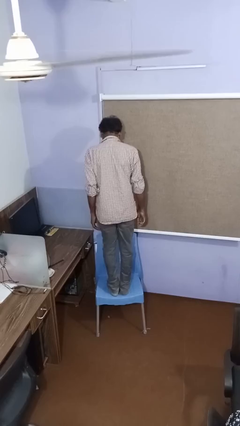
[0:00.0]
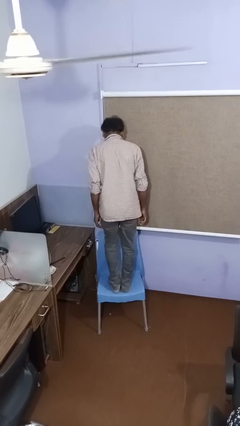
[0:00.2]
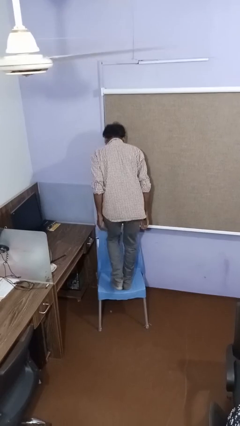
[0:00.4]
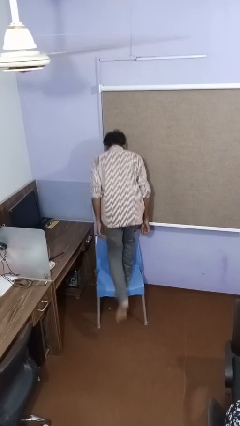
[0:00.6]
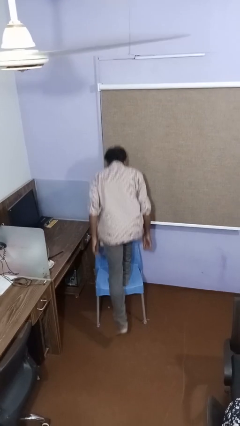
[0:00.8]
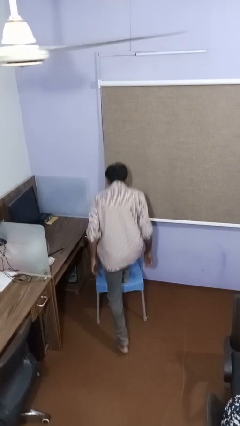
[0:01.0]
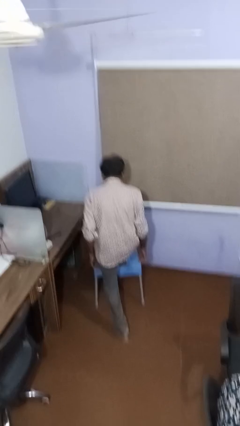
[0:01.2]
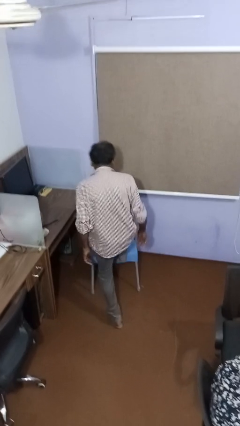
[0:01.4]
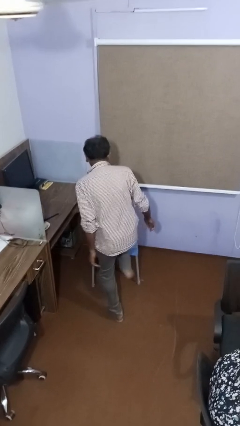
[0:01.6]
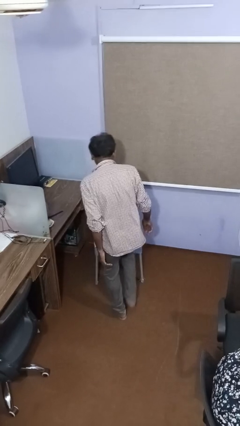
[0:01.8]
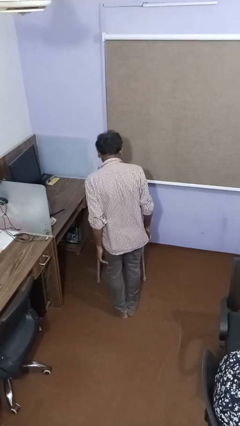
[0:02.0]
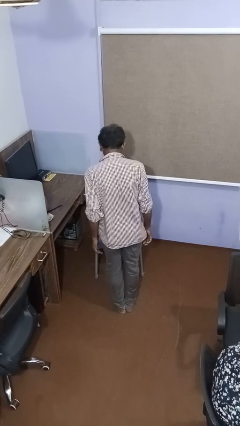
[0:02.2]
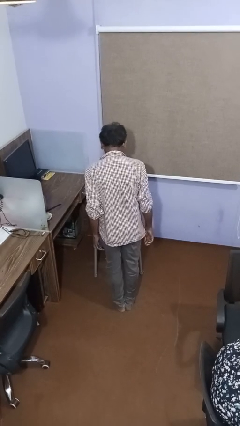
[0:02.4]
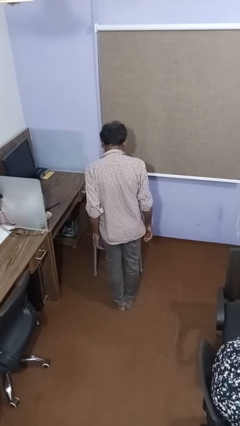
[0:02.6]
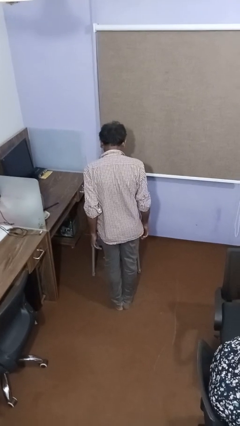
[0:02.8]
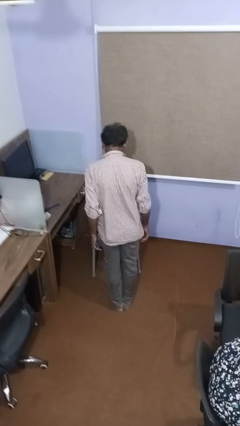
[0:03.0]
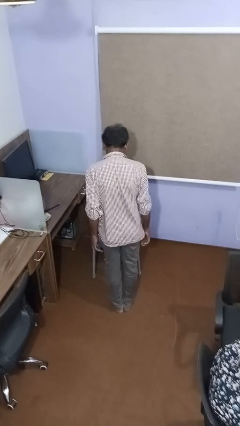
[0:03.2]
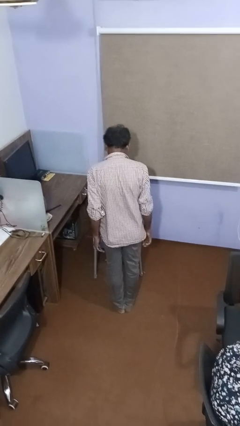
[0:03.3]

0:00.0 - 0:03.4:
person climbs off chair

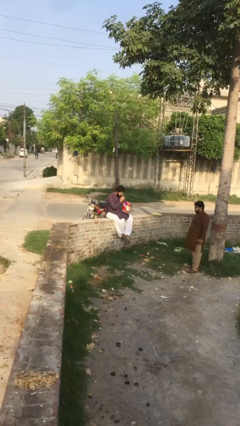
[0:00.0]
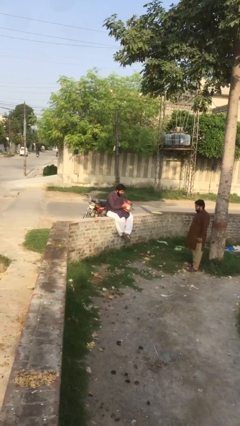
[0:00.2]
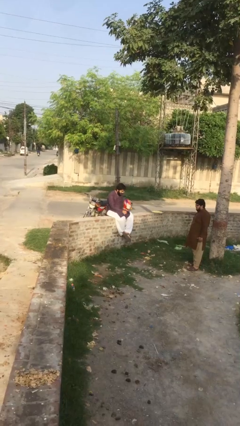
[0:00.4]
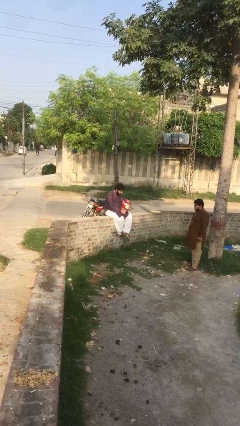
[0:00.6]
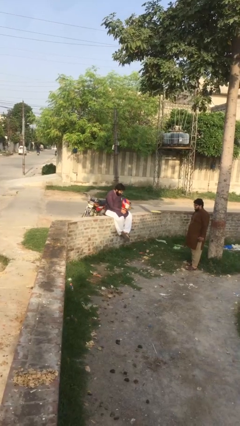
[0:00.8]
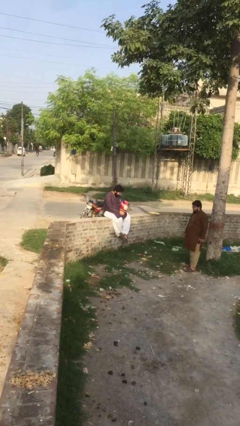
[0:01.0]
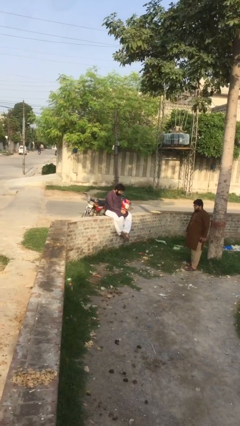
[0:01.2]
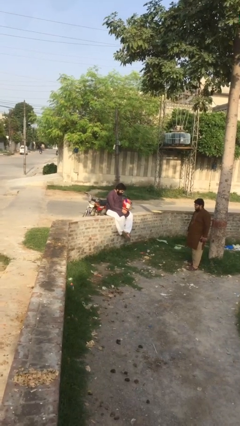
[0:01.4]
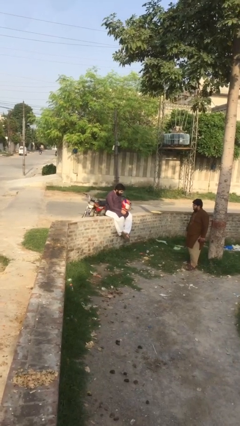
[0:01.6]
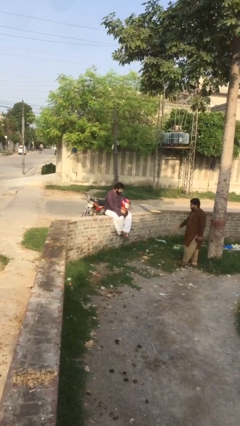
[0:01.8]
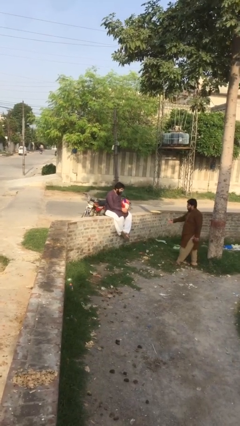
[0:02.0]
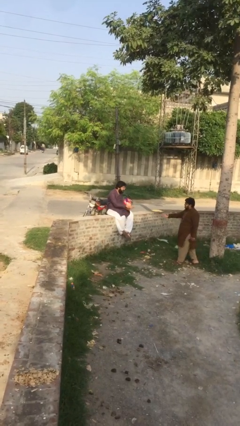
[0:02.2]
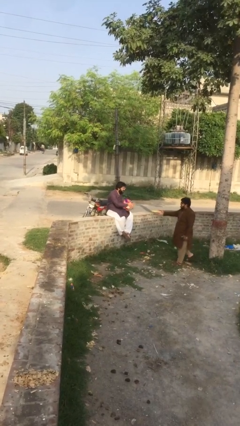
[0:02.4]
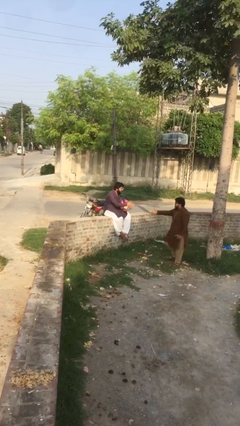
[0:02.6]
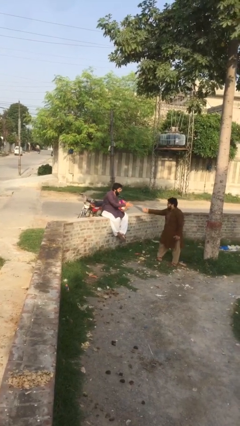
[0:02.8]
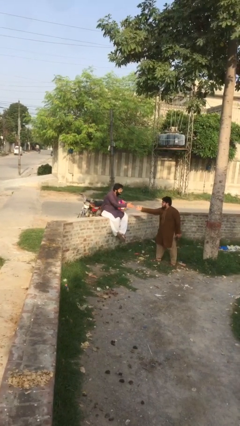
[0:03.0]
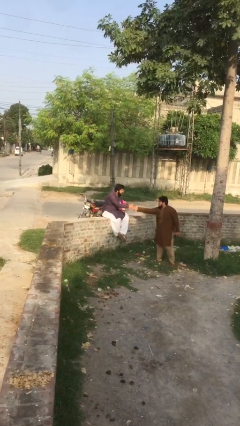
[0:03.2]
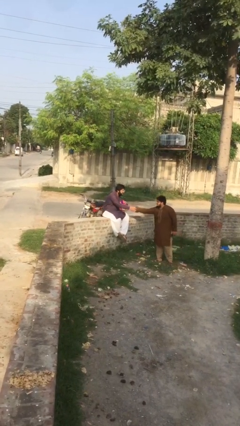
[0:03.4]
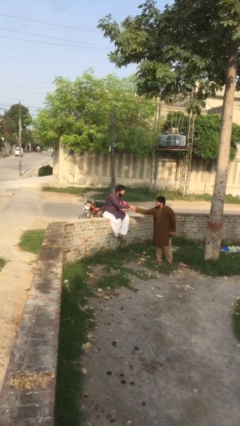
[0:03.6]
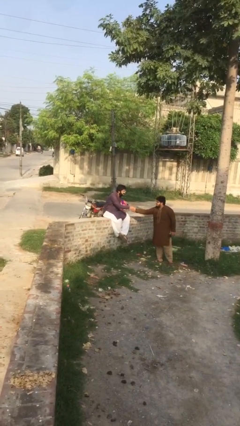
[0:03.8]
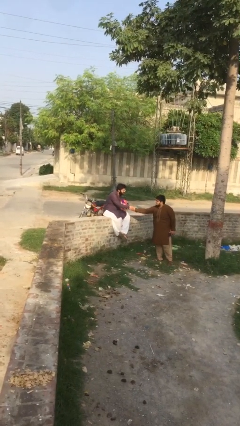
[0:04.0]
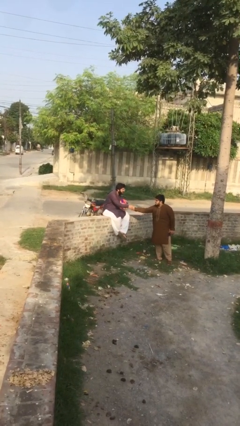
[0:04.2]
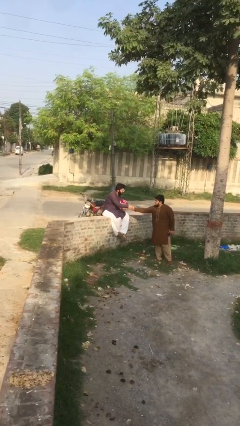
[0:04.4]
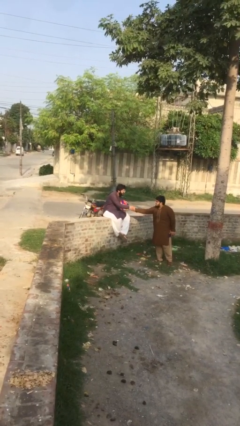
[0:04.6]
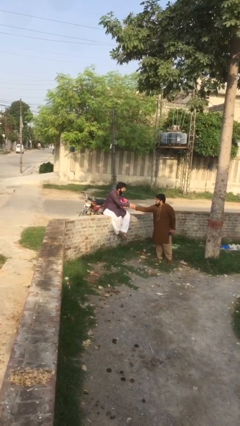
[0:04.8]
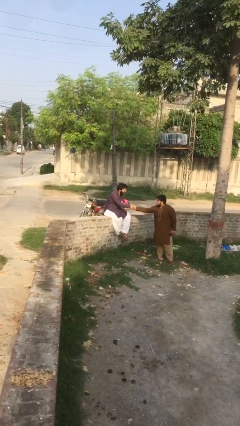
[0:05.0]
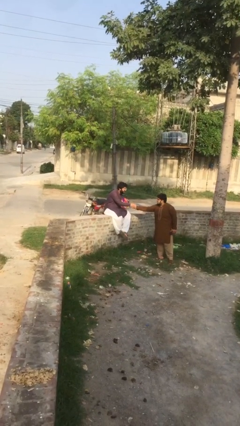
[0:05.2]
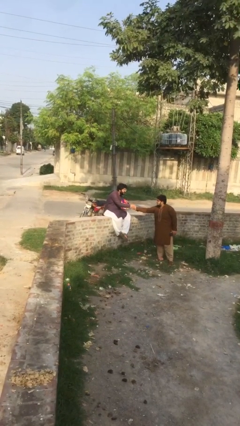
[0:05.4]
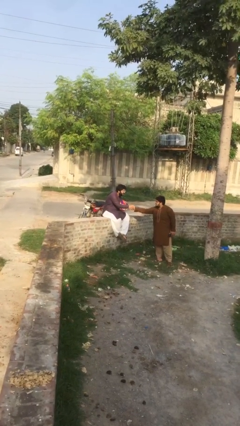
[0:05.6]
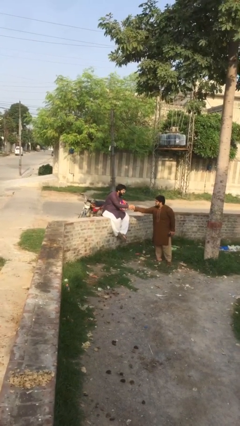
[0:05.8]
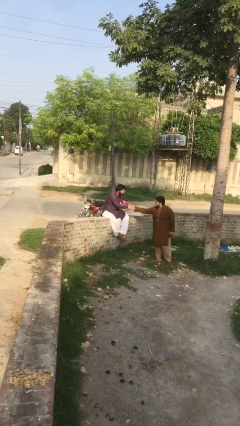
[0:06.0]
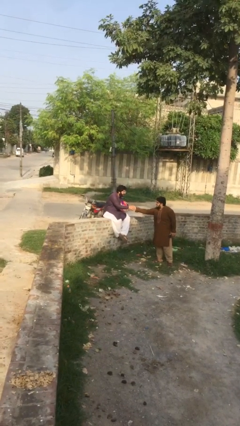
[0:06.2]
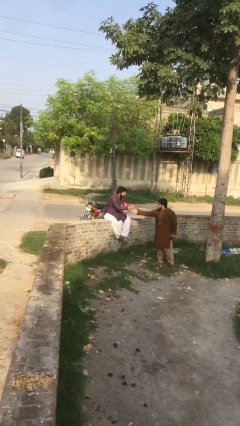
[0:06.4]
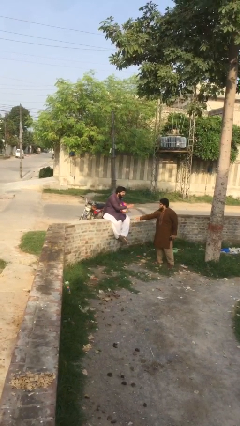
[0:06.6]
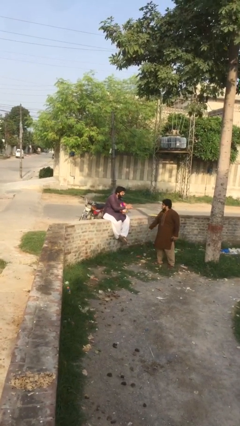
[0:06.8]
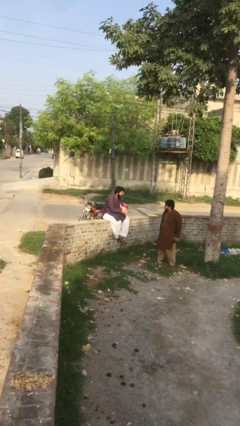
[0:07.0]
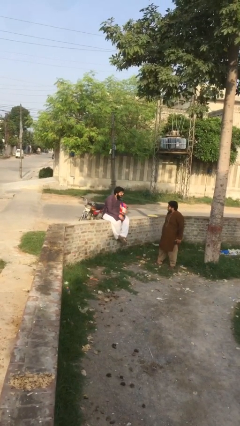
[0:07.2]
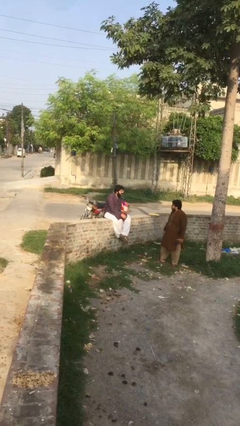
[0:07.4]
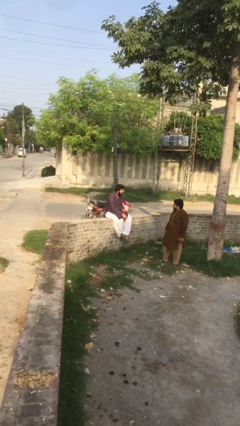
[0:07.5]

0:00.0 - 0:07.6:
person shakes hand

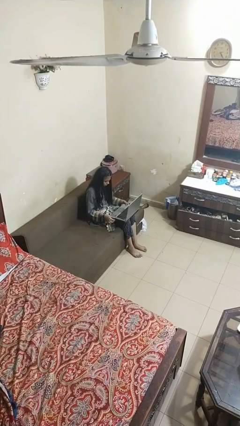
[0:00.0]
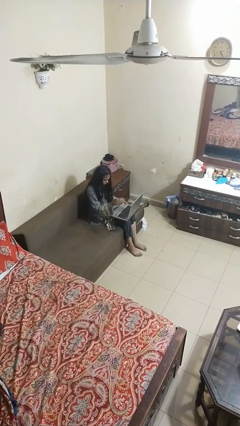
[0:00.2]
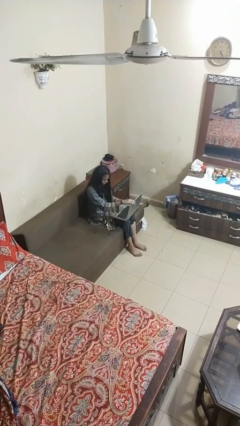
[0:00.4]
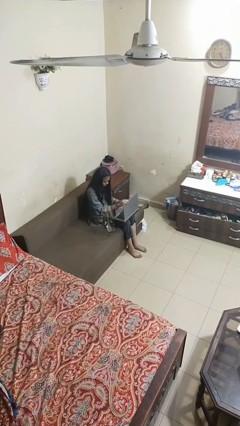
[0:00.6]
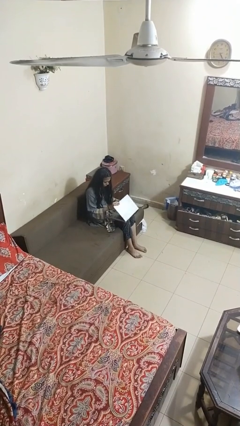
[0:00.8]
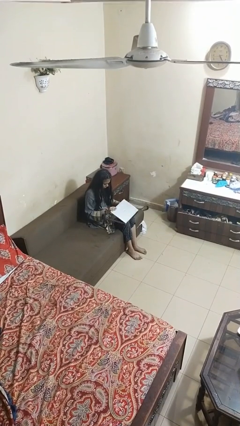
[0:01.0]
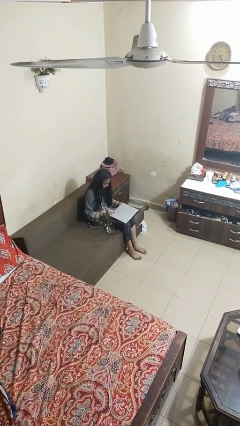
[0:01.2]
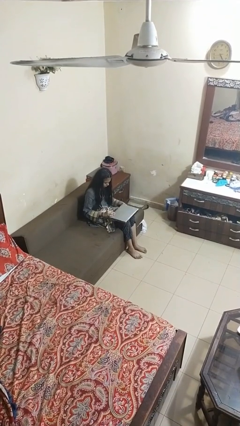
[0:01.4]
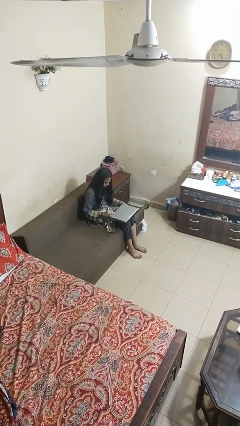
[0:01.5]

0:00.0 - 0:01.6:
person closes laptop

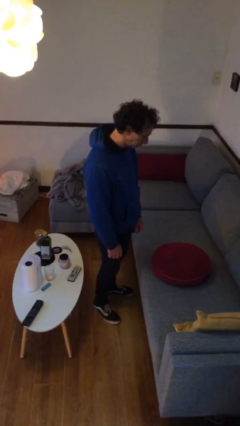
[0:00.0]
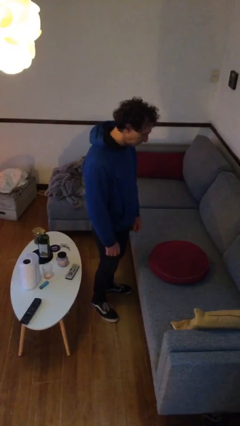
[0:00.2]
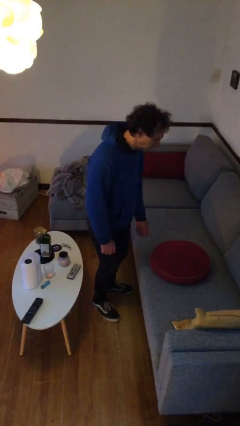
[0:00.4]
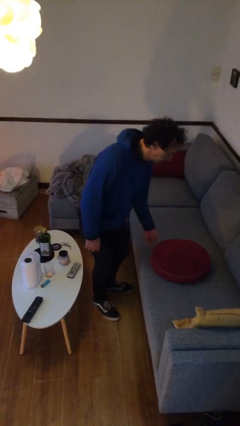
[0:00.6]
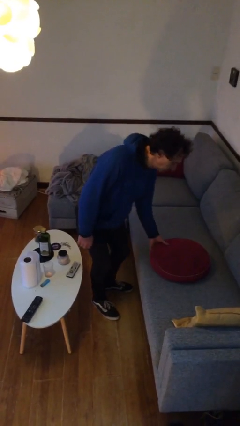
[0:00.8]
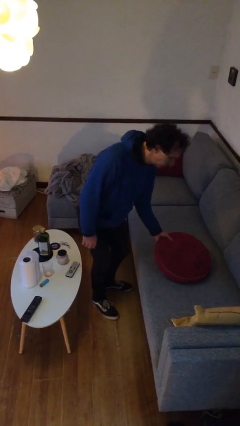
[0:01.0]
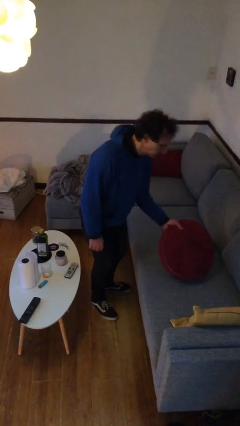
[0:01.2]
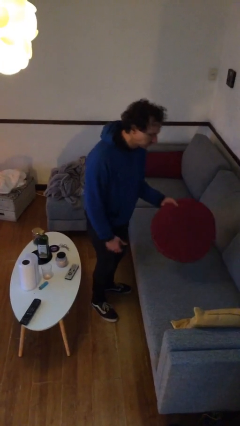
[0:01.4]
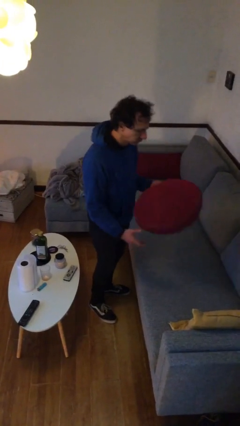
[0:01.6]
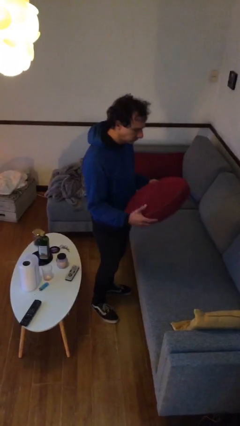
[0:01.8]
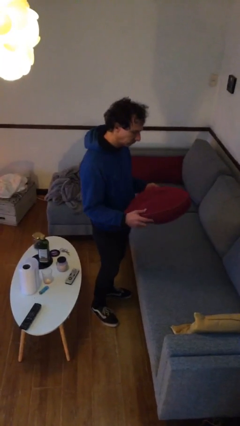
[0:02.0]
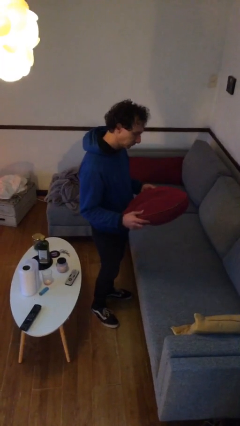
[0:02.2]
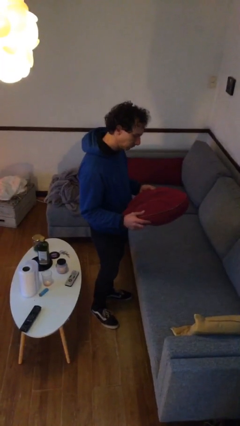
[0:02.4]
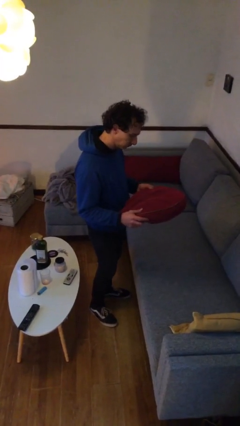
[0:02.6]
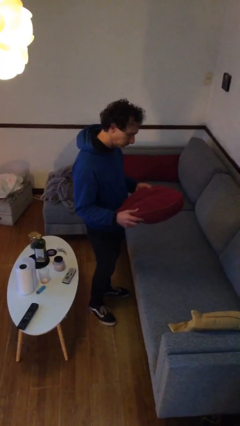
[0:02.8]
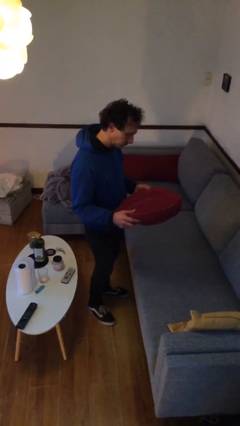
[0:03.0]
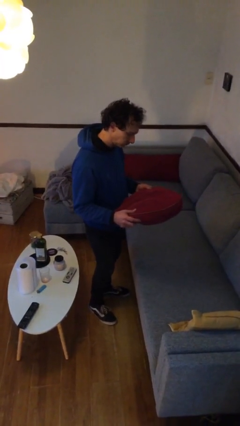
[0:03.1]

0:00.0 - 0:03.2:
person picks up object from couch

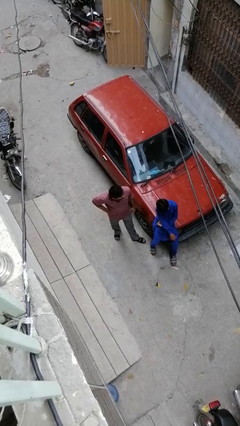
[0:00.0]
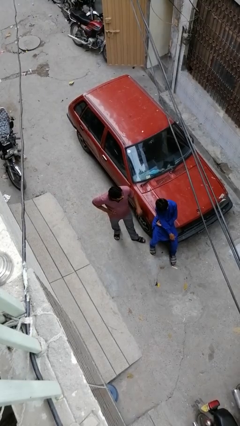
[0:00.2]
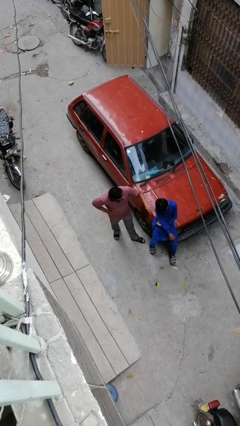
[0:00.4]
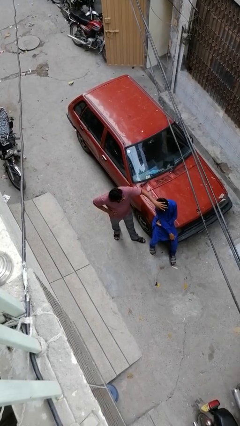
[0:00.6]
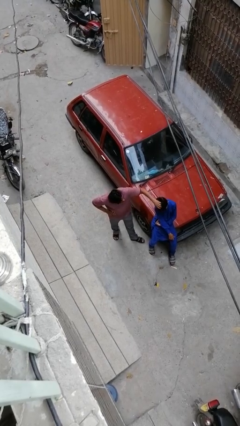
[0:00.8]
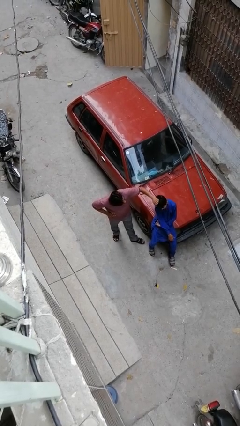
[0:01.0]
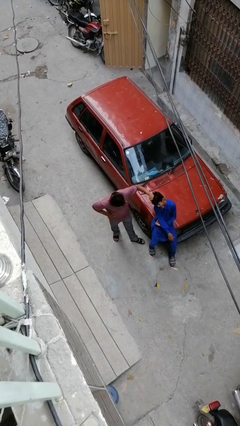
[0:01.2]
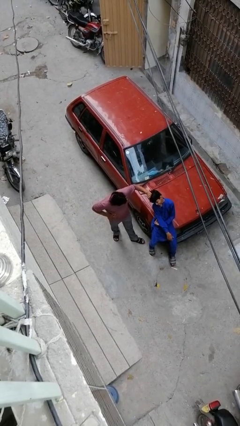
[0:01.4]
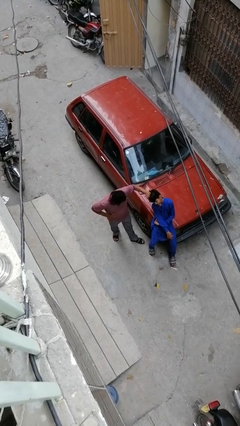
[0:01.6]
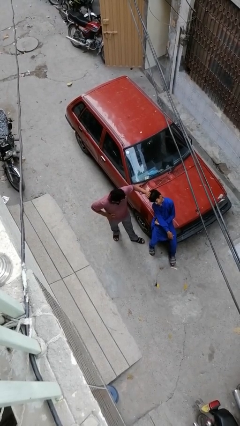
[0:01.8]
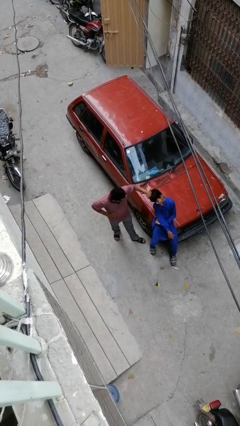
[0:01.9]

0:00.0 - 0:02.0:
person grabs person by hair

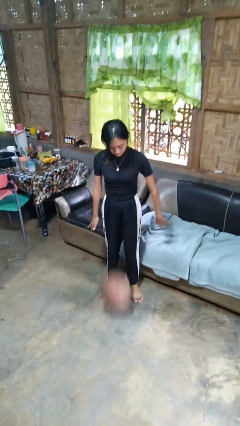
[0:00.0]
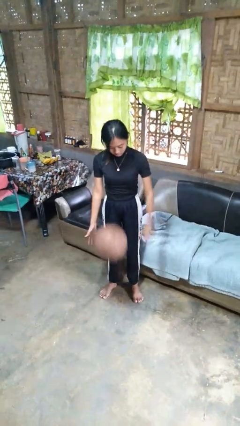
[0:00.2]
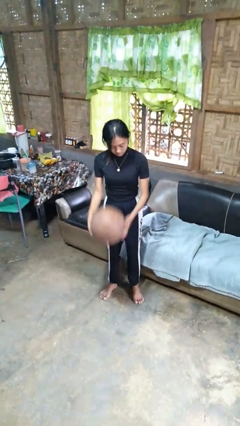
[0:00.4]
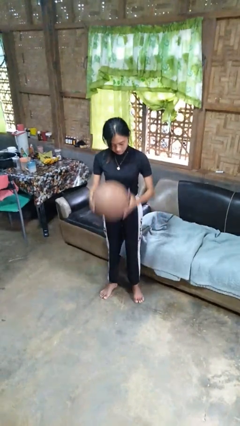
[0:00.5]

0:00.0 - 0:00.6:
person bounces ball on floor
